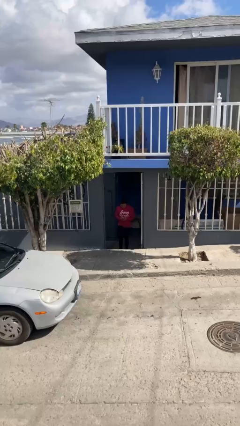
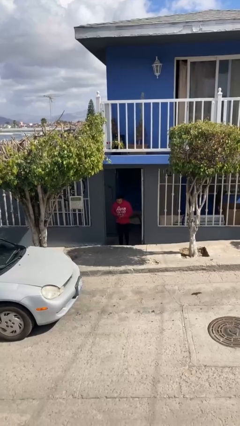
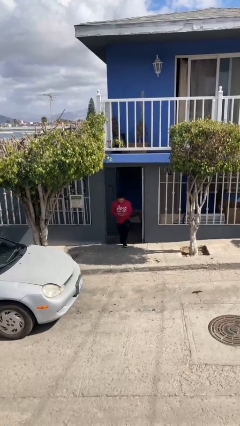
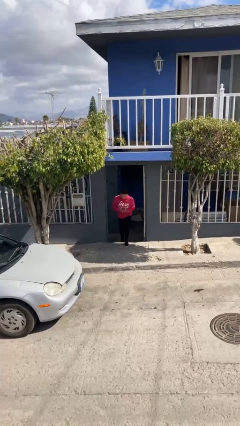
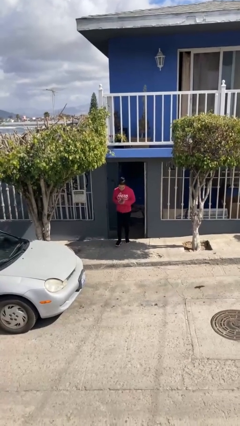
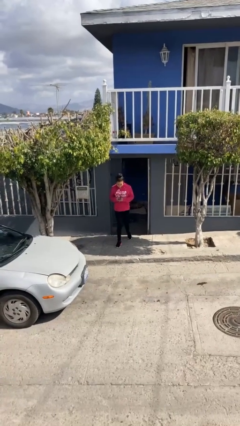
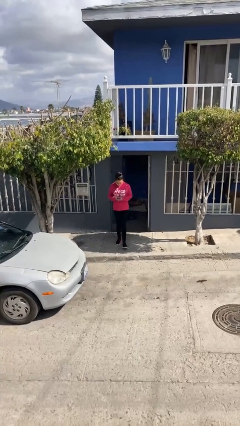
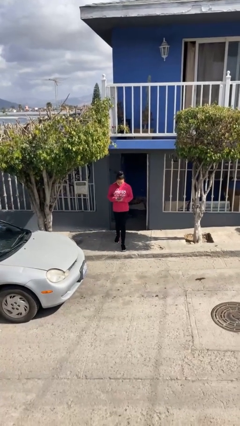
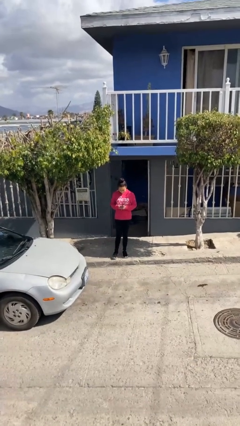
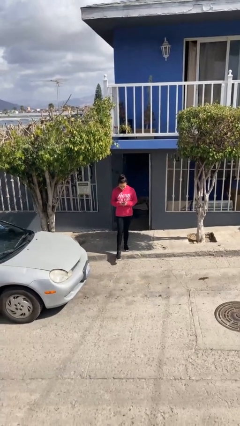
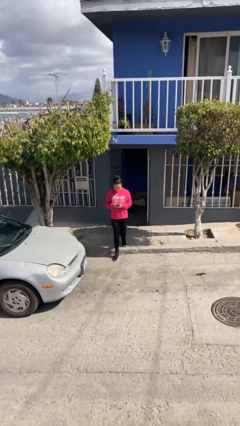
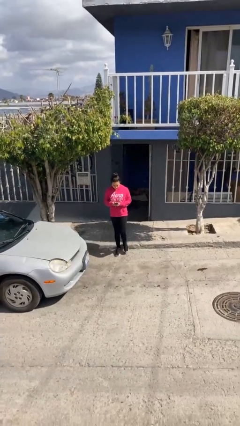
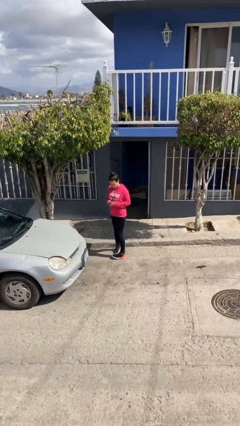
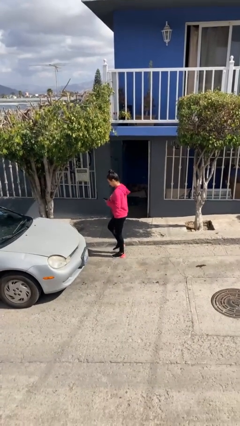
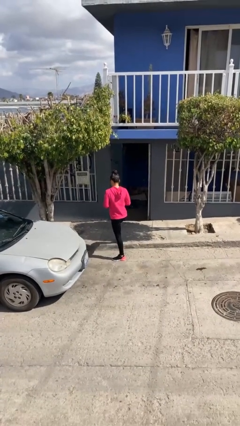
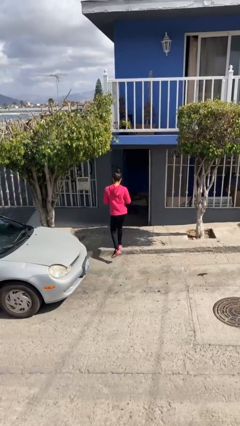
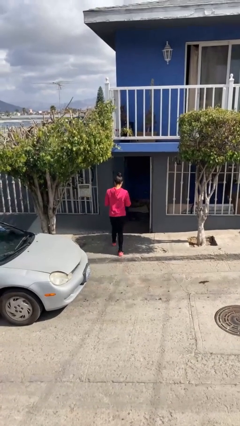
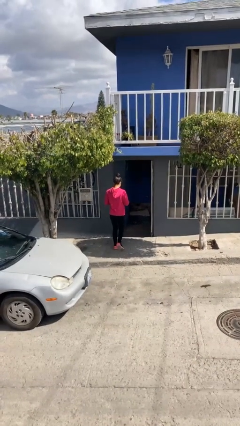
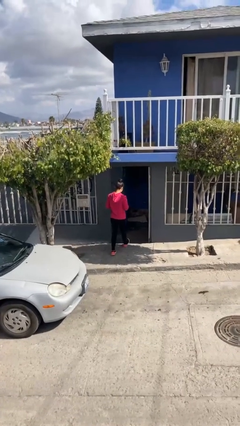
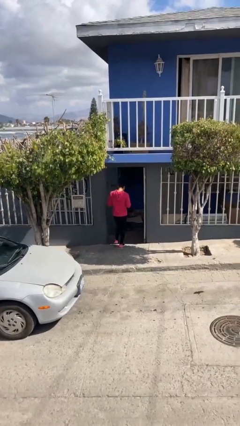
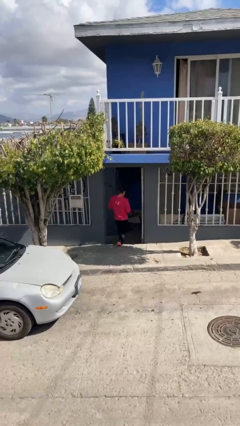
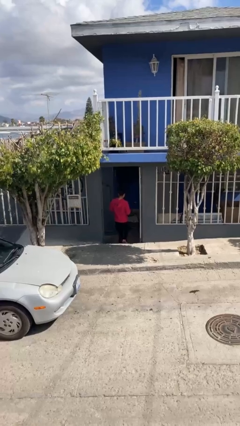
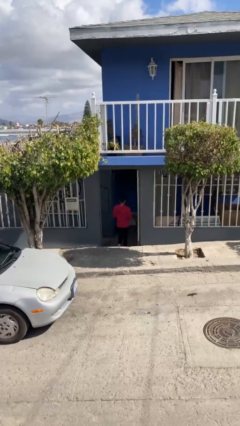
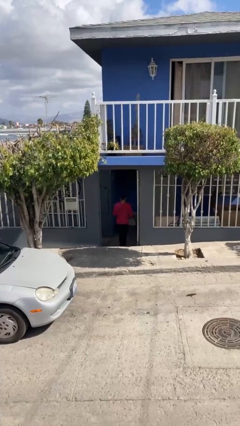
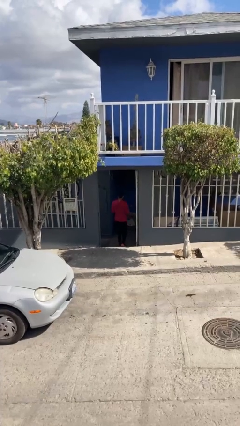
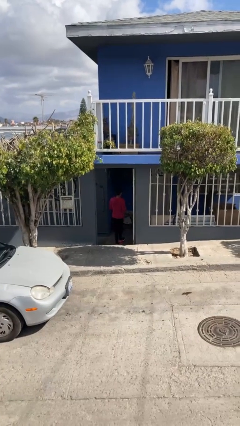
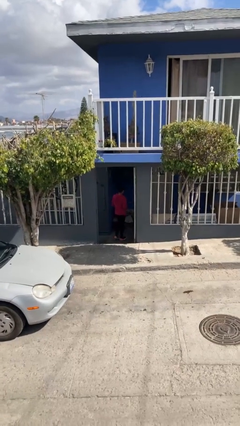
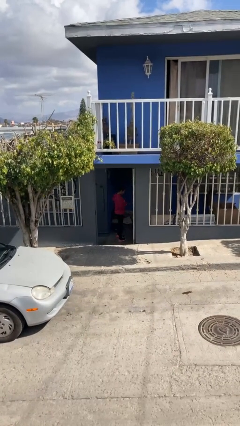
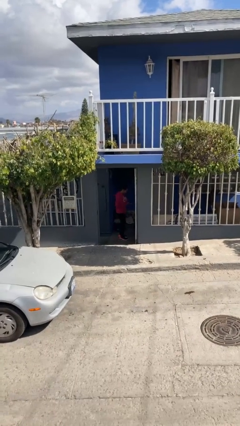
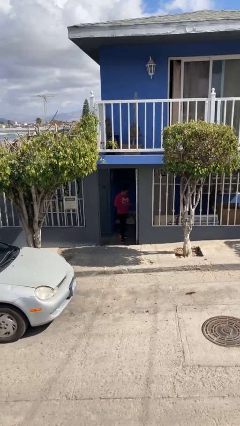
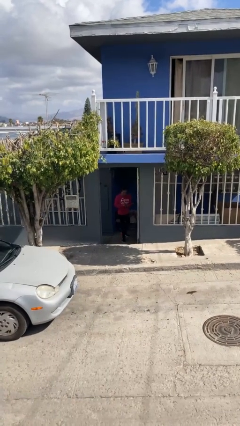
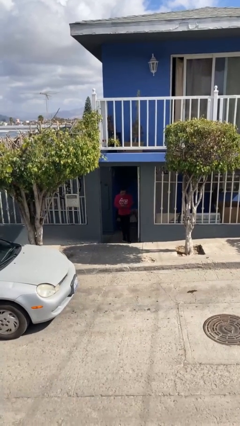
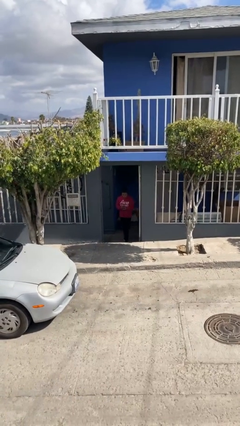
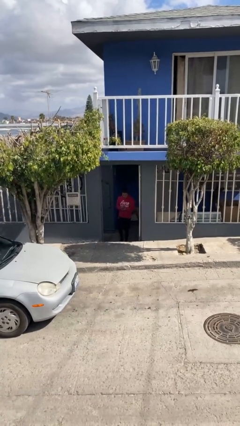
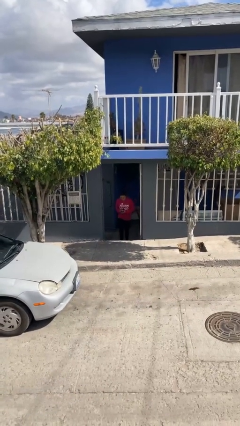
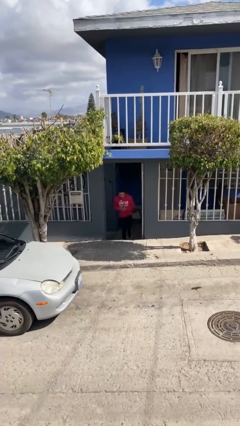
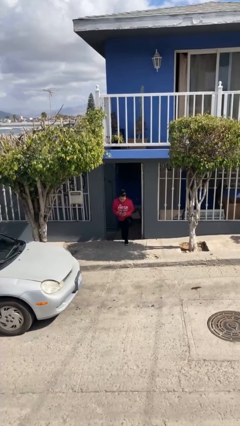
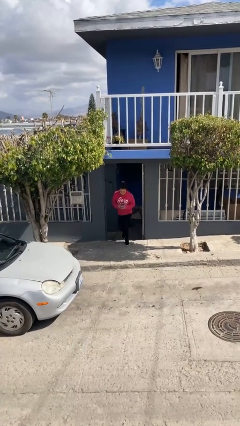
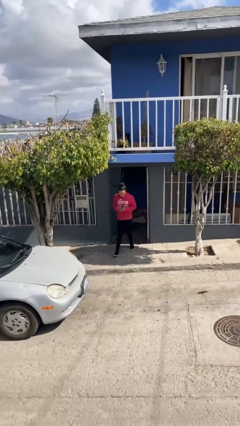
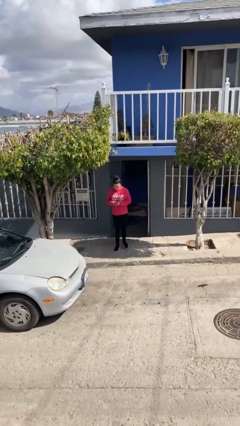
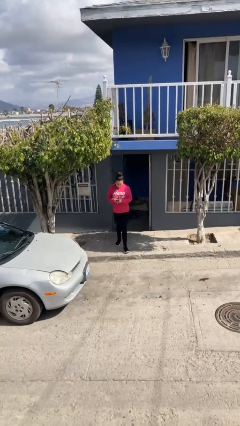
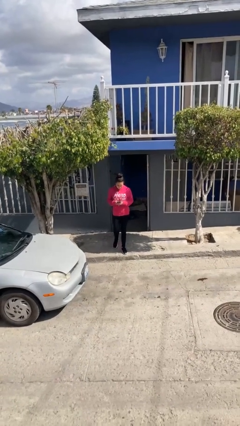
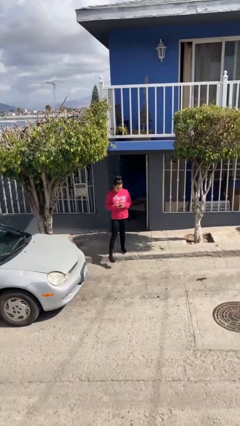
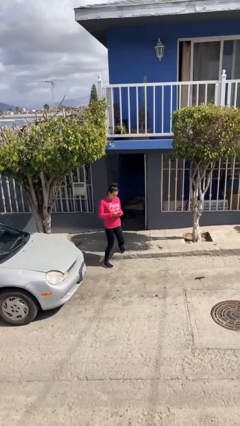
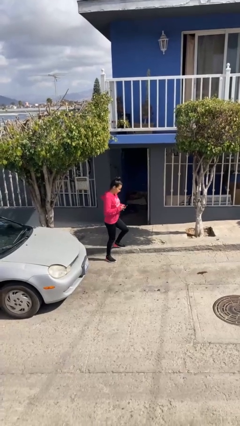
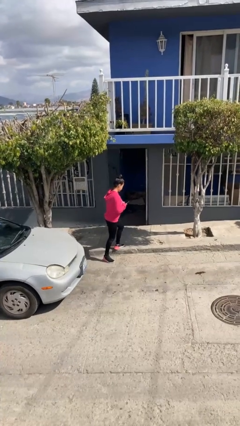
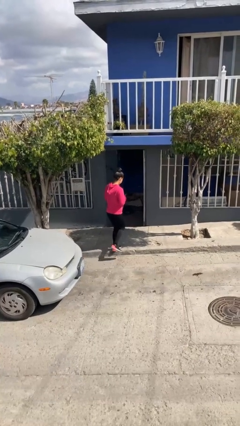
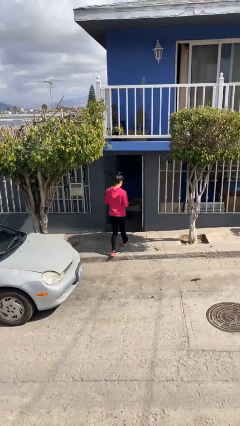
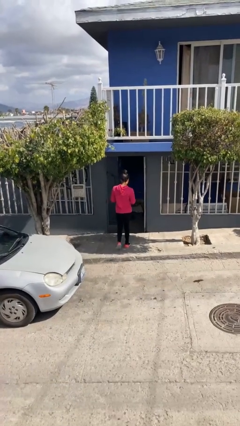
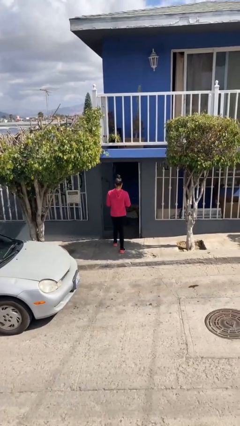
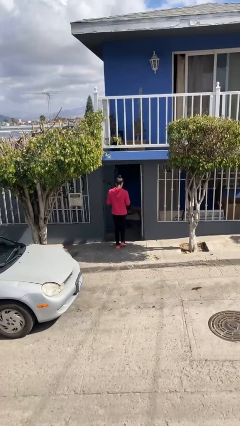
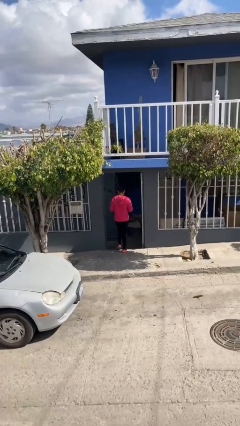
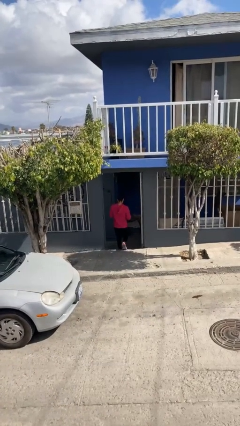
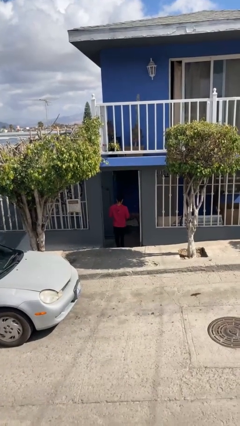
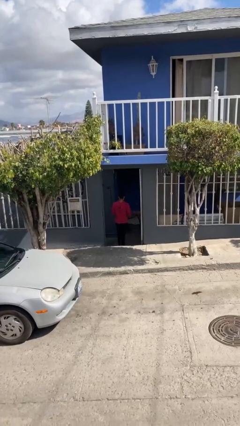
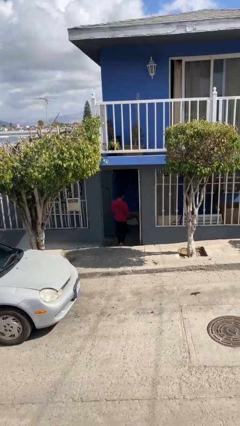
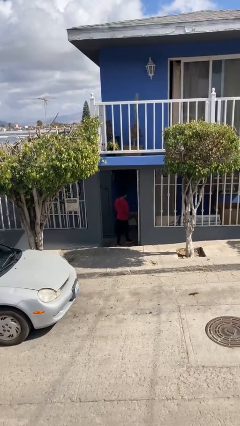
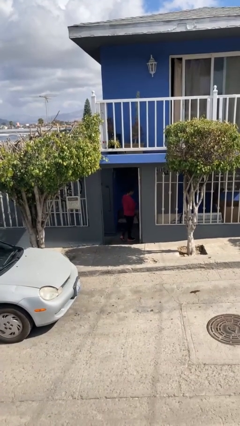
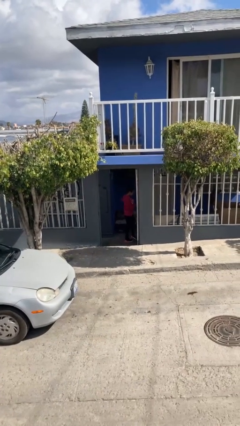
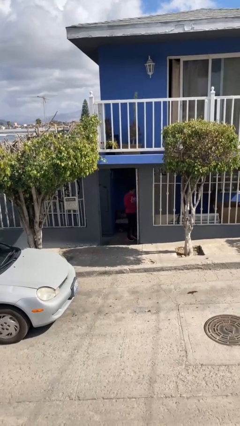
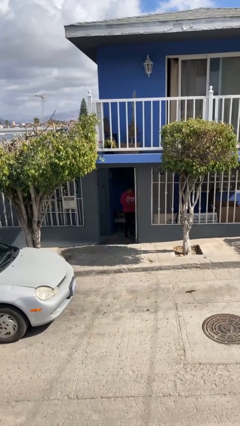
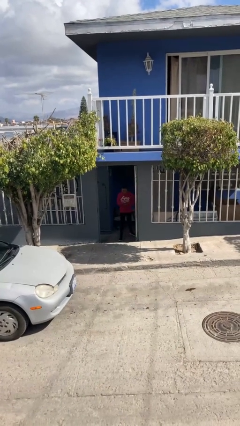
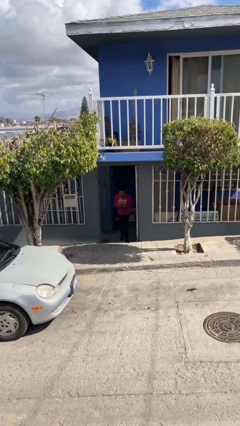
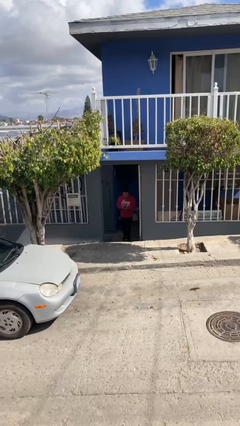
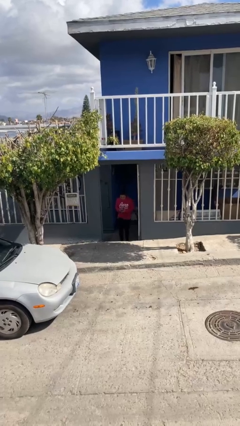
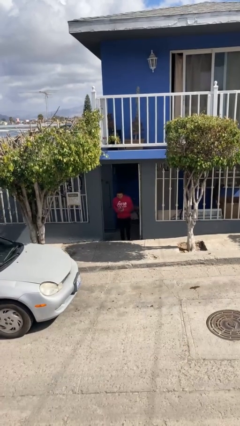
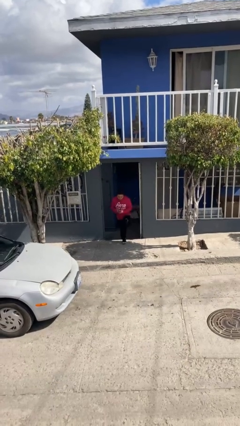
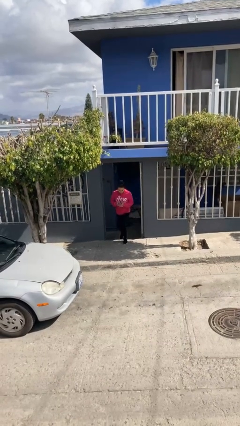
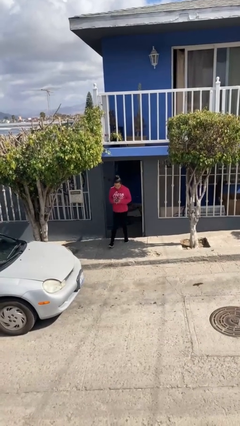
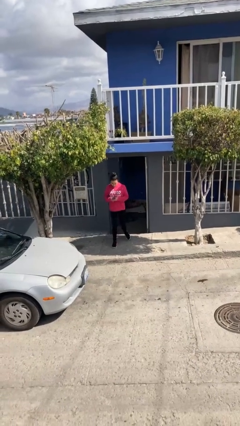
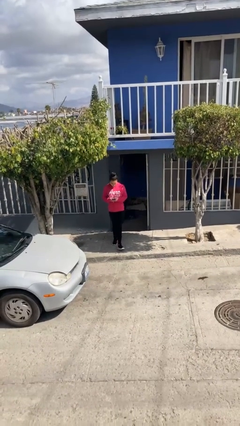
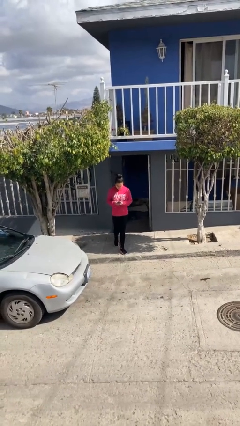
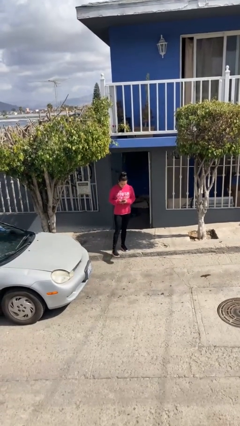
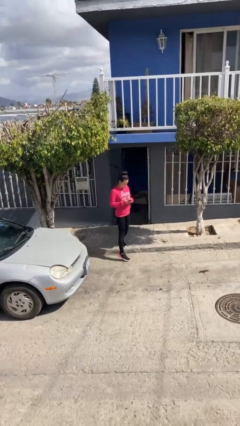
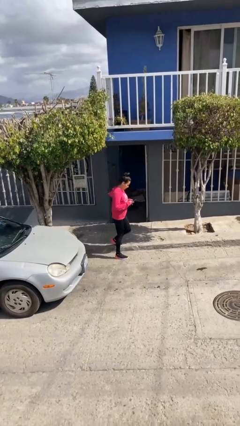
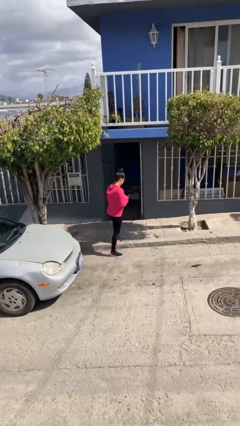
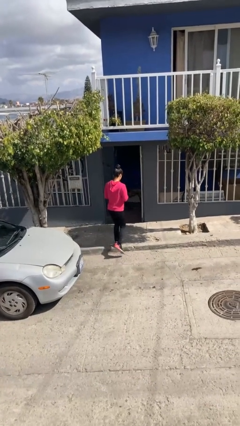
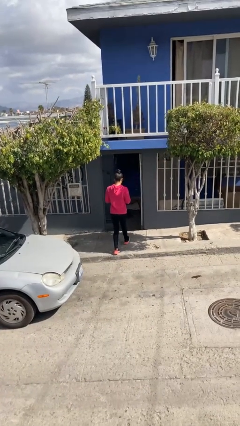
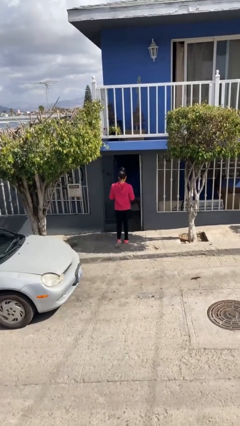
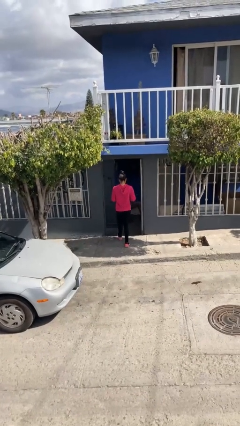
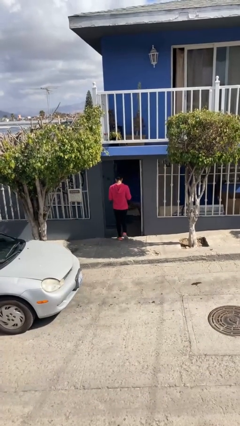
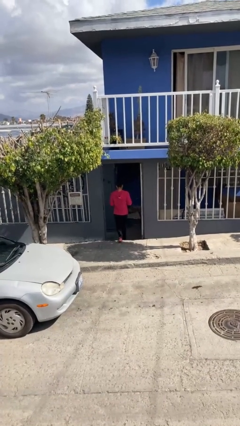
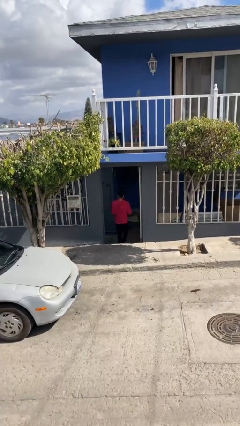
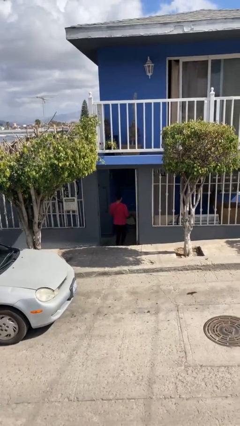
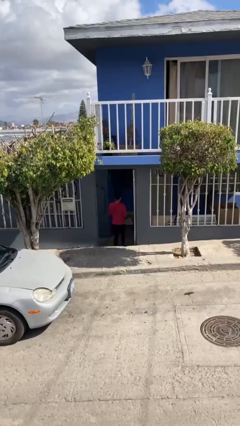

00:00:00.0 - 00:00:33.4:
person texts on phone

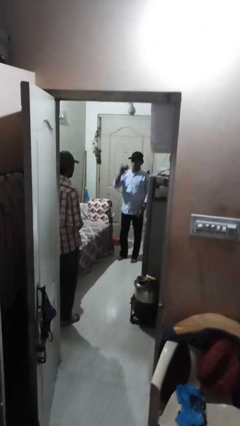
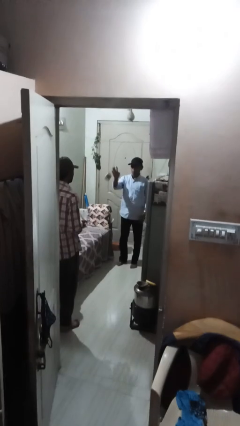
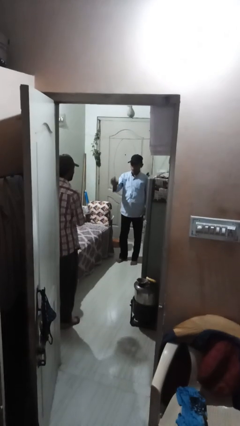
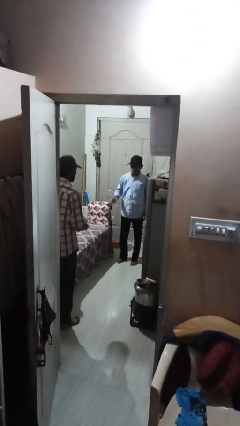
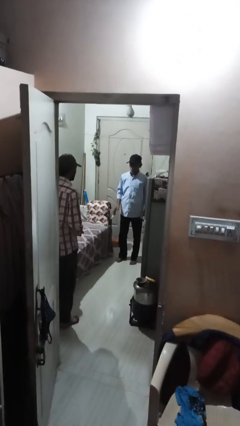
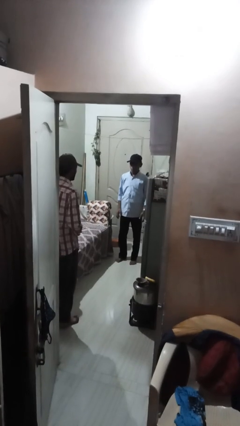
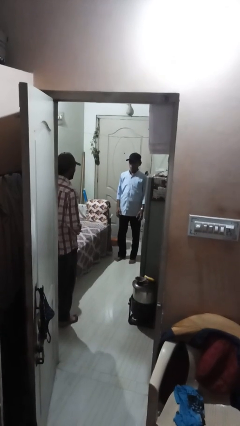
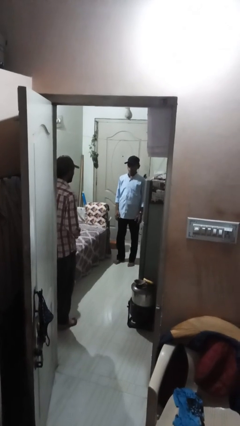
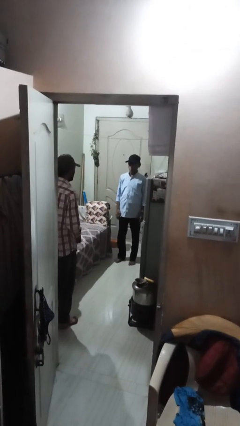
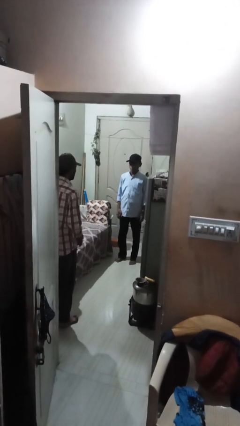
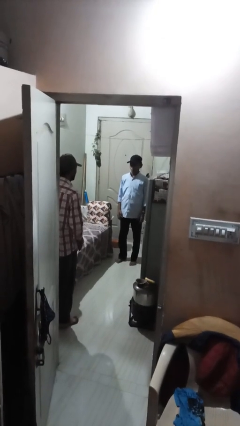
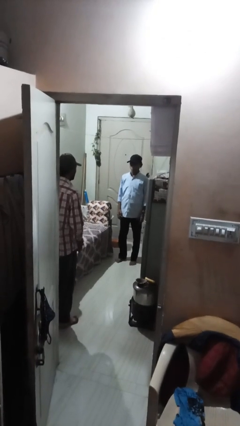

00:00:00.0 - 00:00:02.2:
person throws object to person
